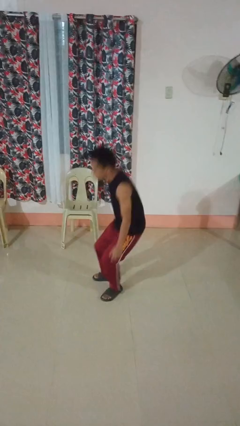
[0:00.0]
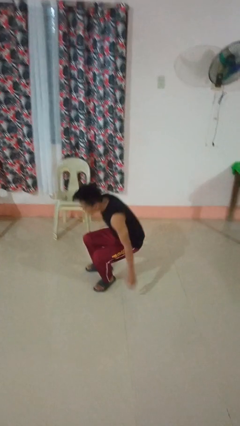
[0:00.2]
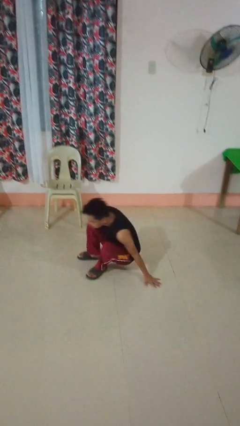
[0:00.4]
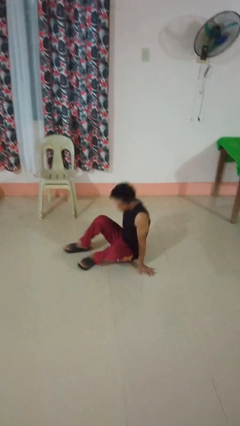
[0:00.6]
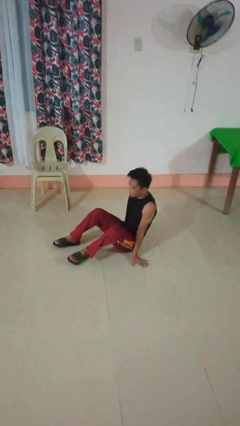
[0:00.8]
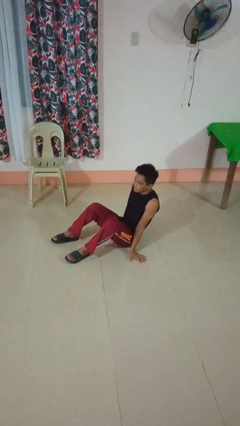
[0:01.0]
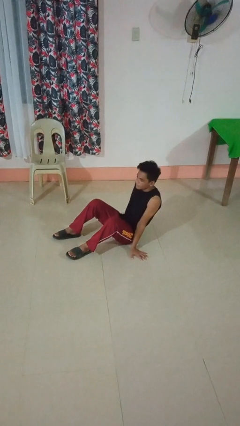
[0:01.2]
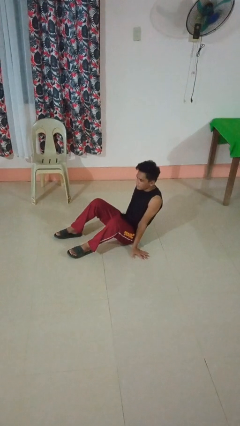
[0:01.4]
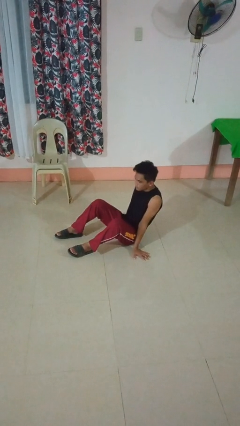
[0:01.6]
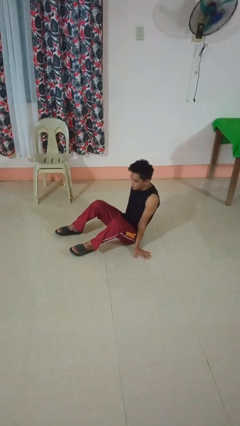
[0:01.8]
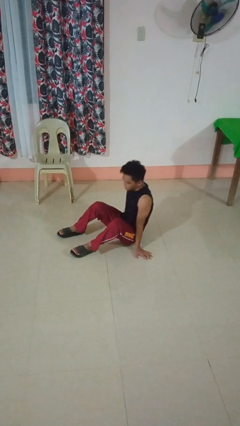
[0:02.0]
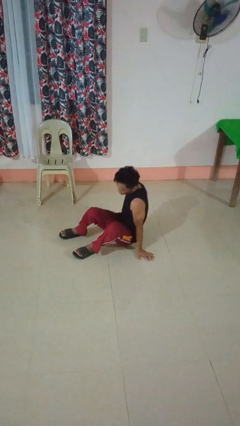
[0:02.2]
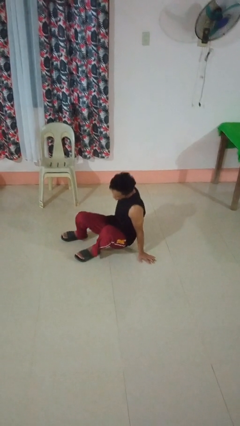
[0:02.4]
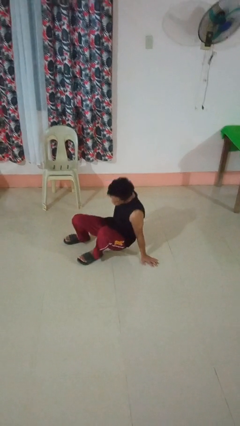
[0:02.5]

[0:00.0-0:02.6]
person falls while standing

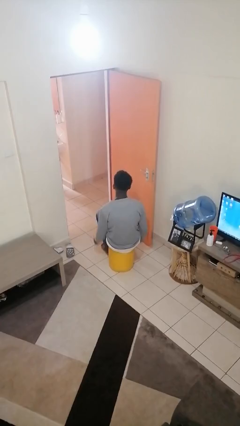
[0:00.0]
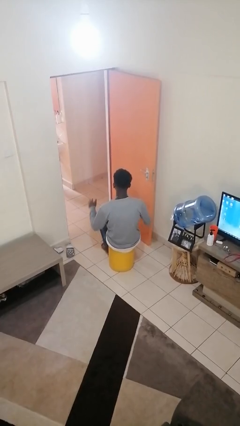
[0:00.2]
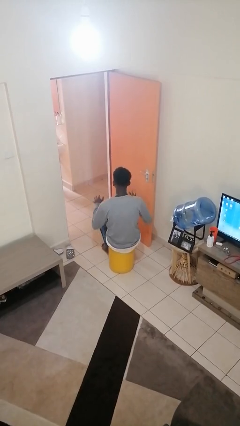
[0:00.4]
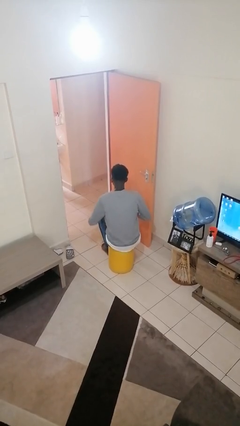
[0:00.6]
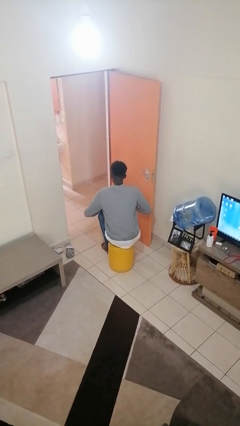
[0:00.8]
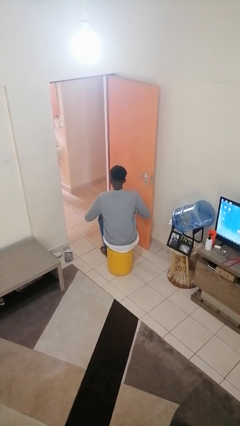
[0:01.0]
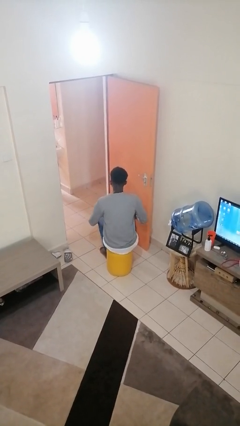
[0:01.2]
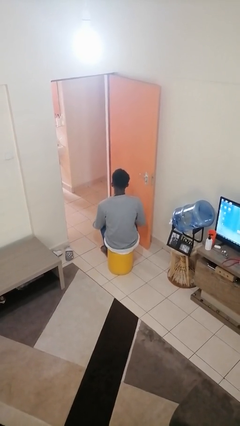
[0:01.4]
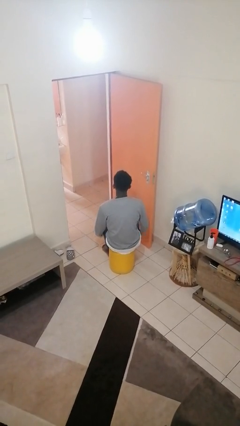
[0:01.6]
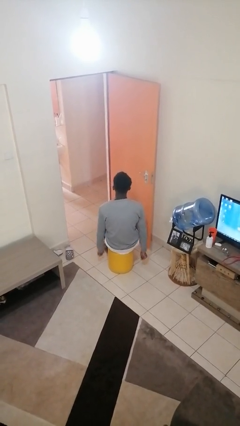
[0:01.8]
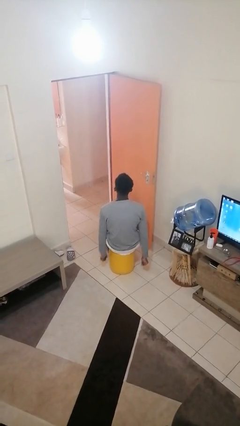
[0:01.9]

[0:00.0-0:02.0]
person slaps hands on thighs

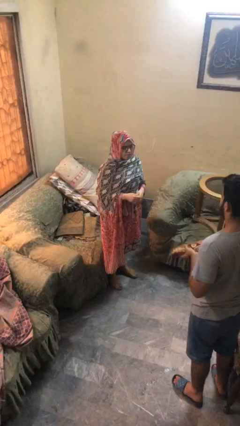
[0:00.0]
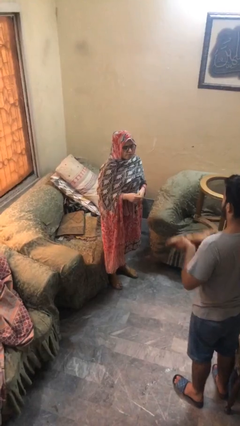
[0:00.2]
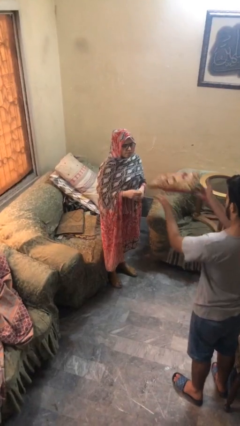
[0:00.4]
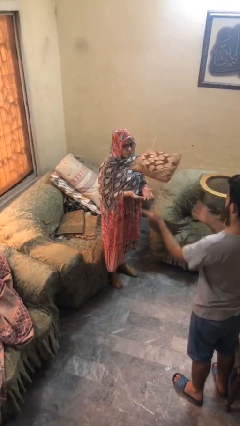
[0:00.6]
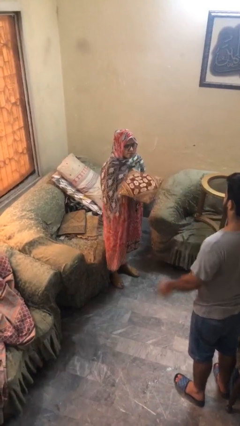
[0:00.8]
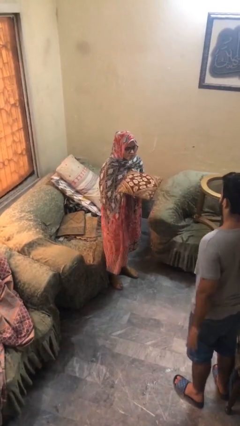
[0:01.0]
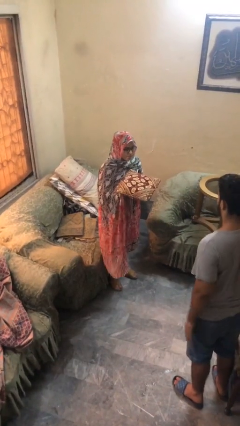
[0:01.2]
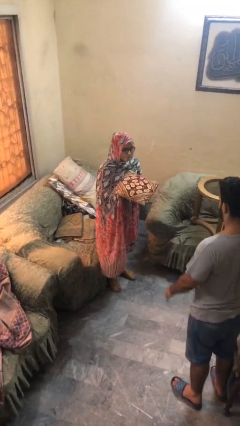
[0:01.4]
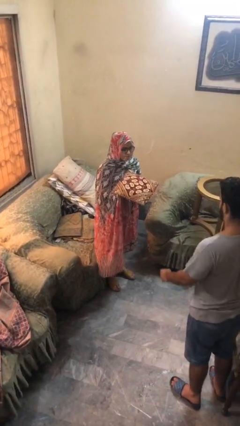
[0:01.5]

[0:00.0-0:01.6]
person catches object from person

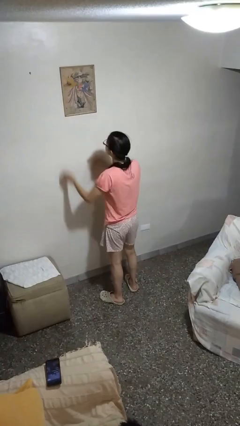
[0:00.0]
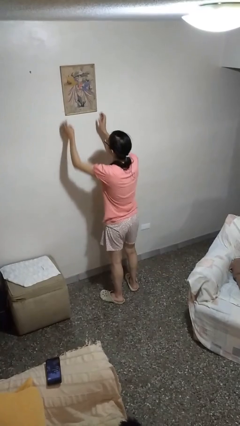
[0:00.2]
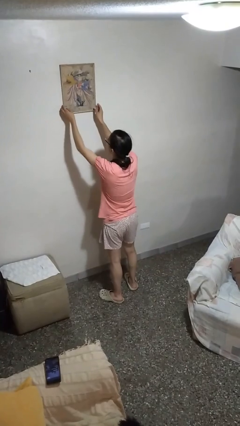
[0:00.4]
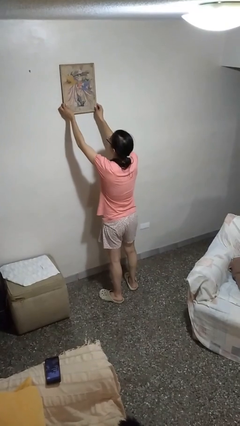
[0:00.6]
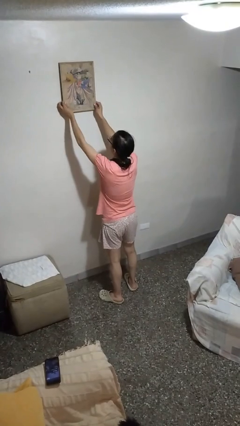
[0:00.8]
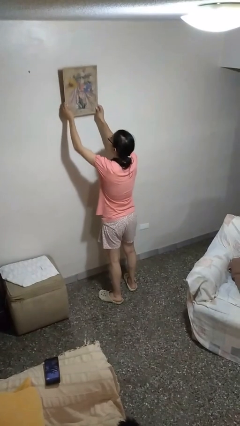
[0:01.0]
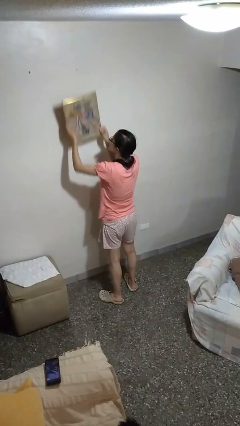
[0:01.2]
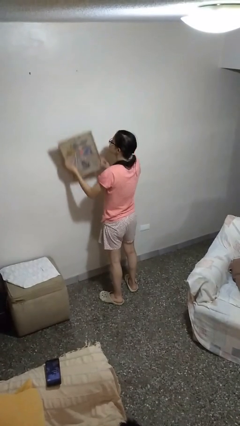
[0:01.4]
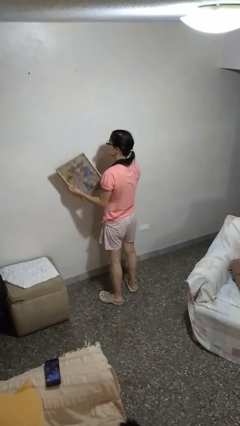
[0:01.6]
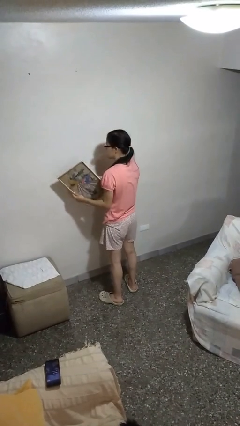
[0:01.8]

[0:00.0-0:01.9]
person takes down picture frame

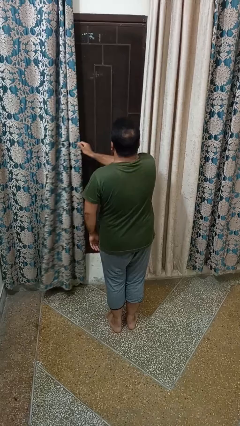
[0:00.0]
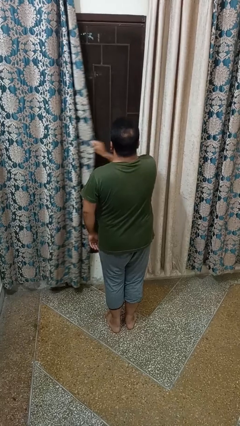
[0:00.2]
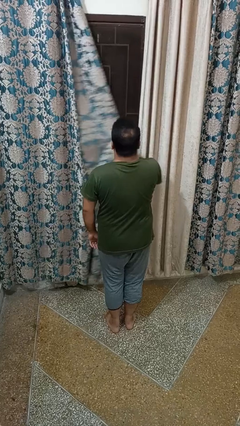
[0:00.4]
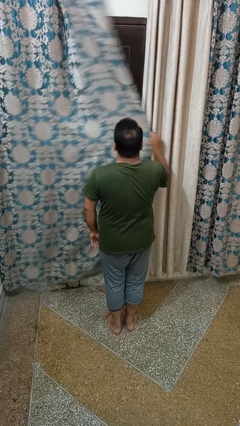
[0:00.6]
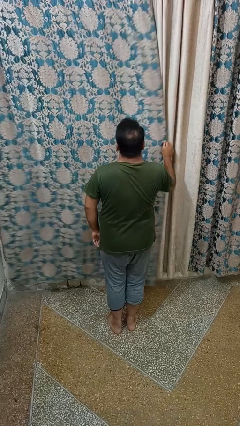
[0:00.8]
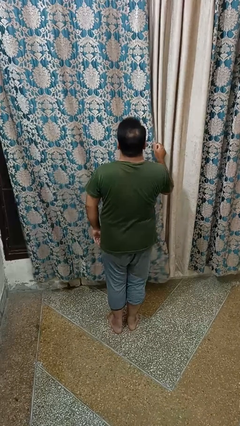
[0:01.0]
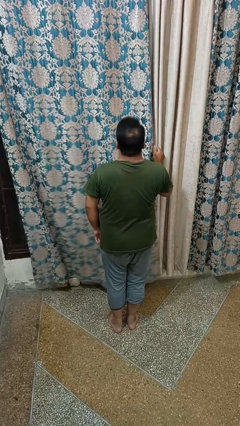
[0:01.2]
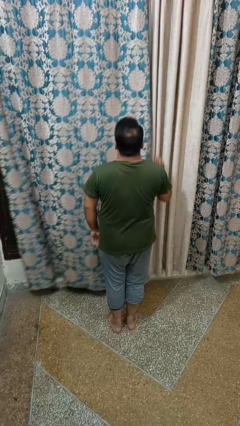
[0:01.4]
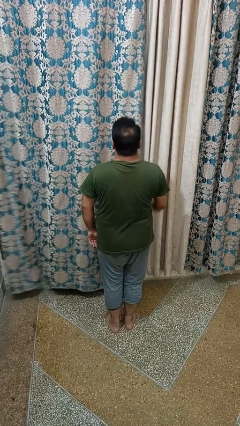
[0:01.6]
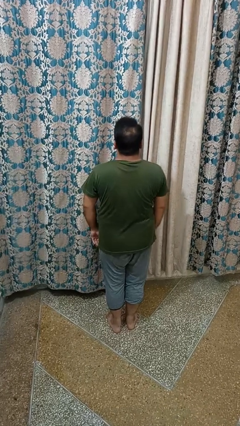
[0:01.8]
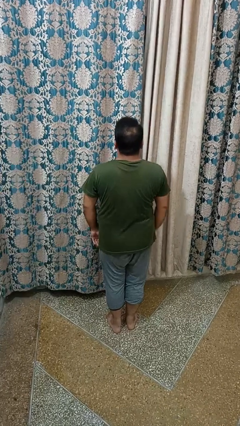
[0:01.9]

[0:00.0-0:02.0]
person closes curtains

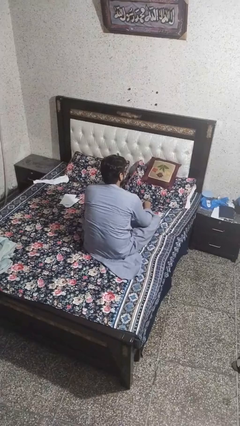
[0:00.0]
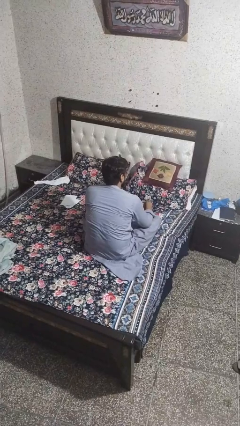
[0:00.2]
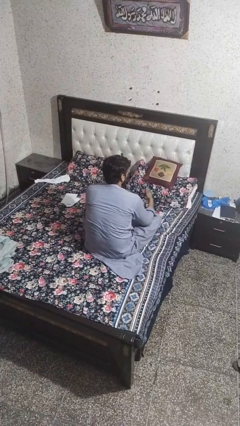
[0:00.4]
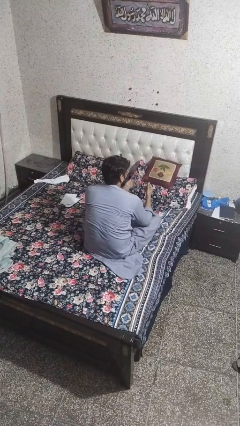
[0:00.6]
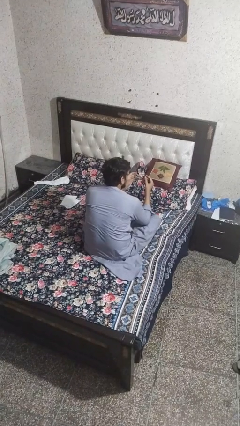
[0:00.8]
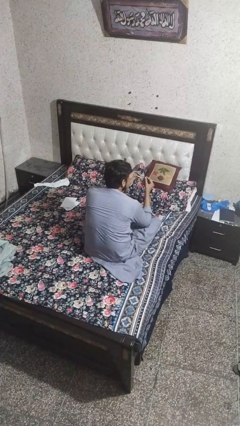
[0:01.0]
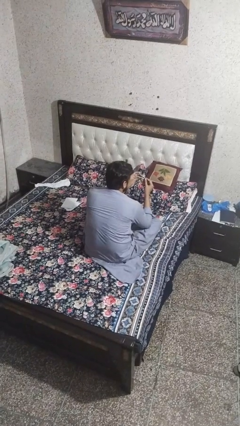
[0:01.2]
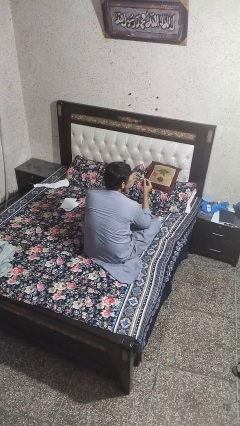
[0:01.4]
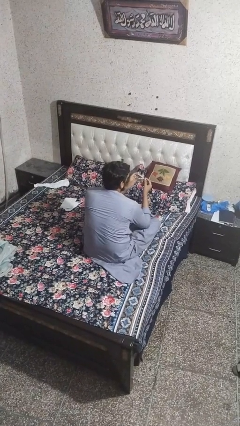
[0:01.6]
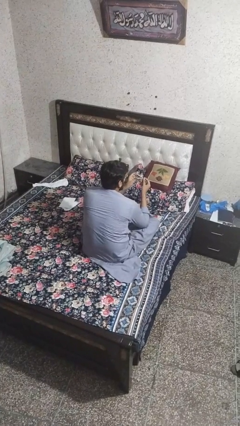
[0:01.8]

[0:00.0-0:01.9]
person clips fingernails

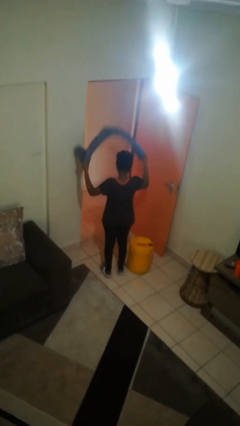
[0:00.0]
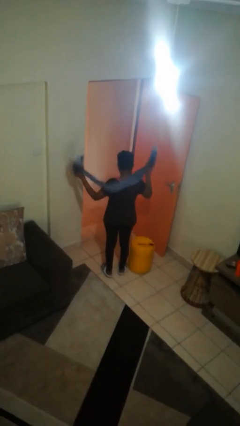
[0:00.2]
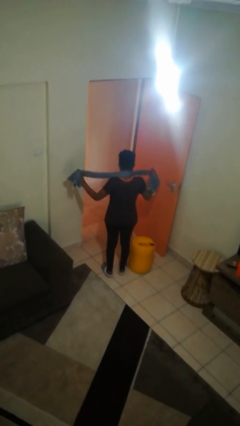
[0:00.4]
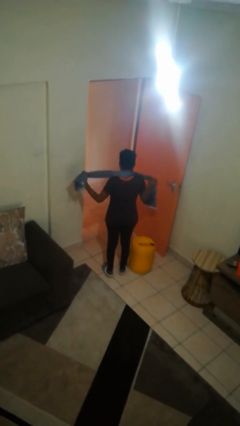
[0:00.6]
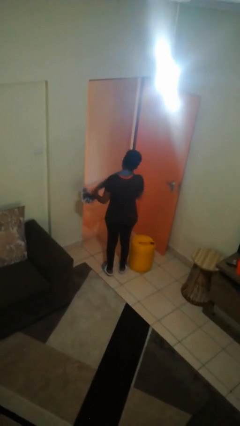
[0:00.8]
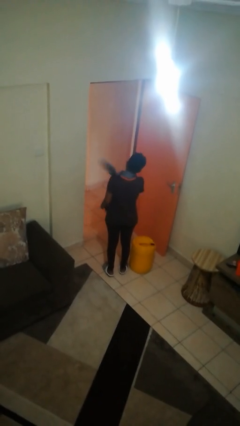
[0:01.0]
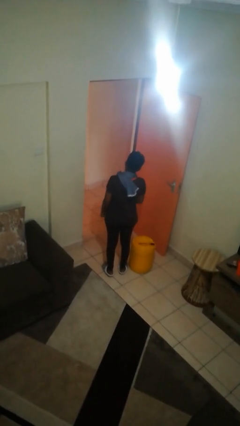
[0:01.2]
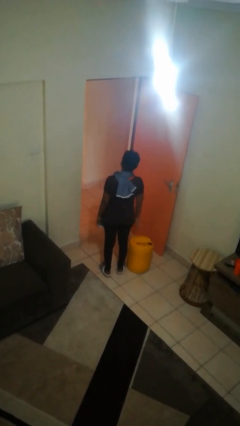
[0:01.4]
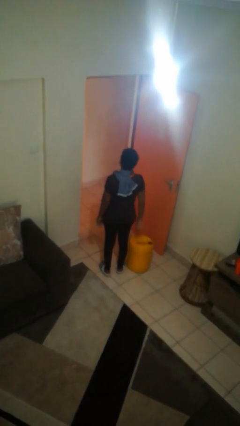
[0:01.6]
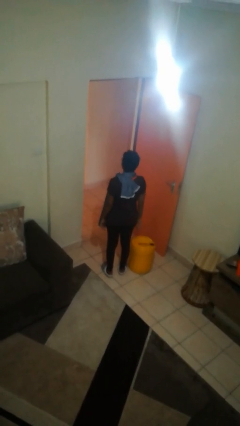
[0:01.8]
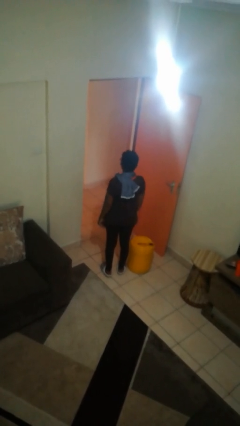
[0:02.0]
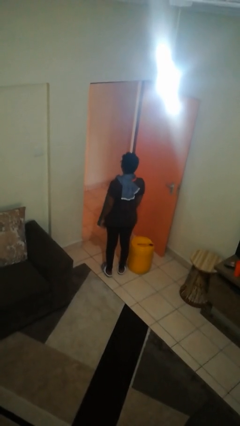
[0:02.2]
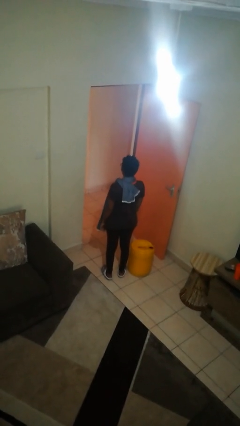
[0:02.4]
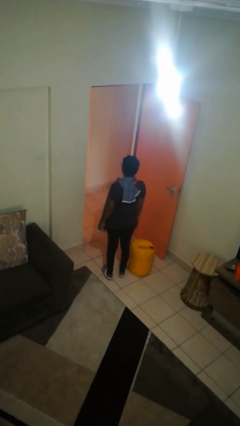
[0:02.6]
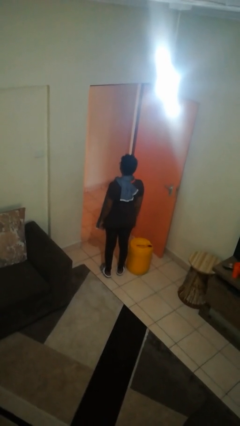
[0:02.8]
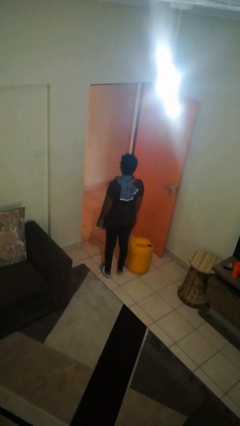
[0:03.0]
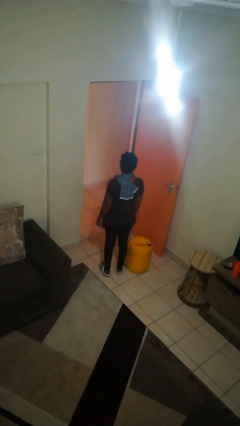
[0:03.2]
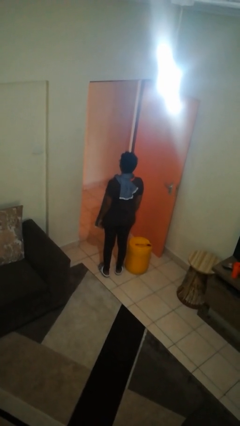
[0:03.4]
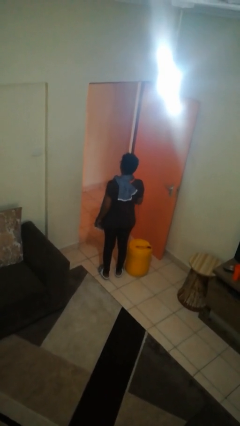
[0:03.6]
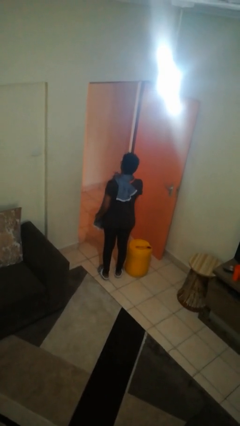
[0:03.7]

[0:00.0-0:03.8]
person puts on scarf

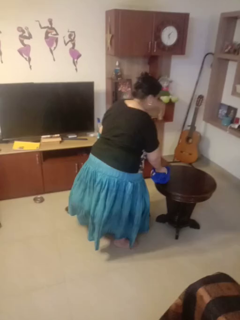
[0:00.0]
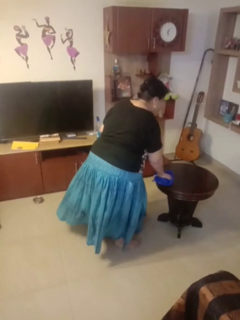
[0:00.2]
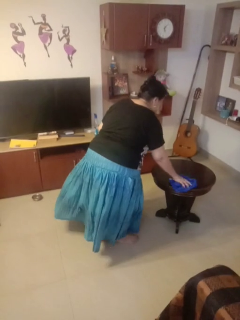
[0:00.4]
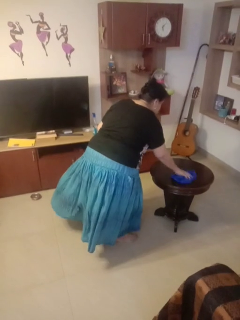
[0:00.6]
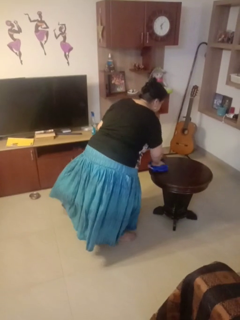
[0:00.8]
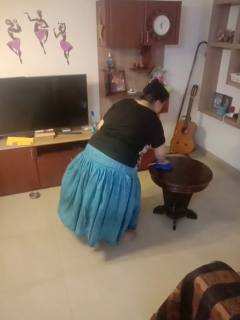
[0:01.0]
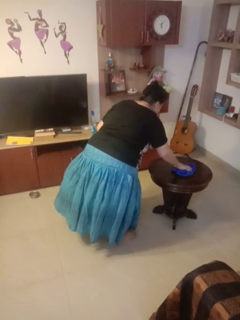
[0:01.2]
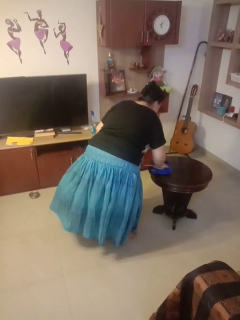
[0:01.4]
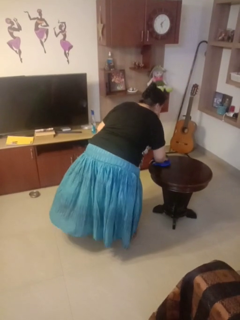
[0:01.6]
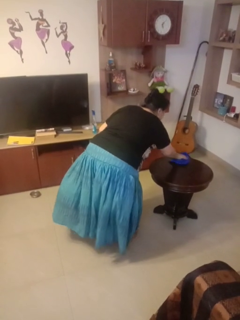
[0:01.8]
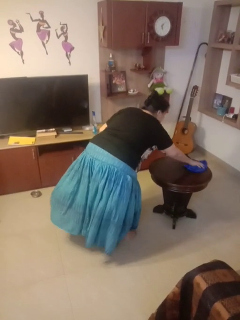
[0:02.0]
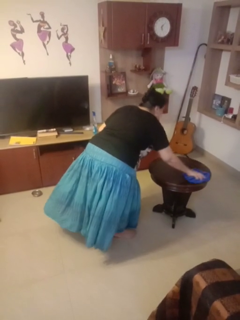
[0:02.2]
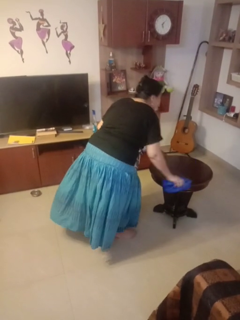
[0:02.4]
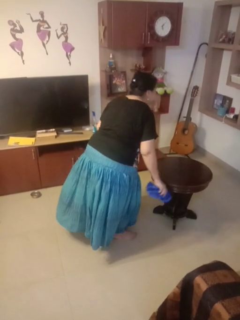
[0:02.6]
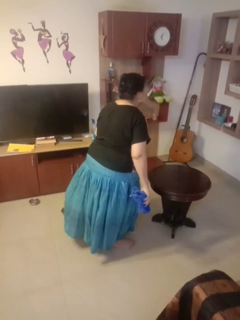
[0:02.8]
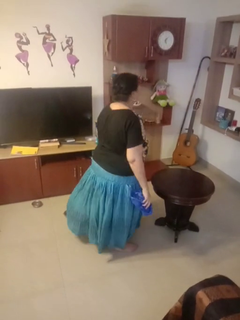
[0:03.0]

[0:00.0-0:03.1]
person cleans table with rag
